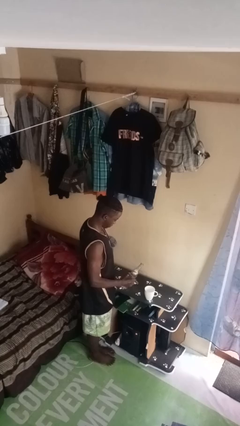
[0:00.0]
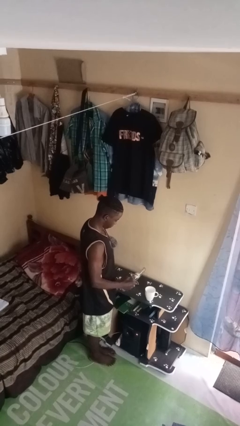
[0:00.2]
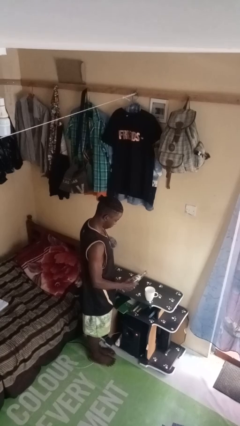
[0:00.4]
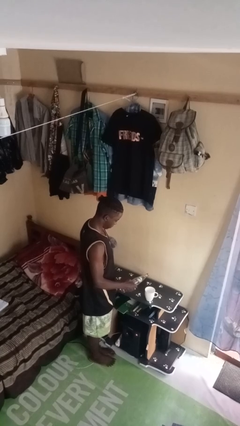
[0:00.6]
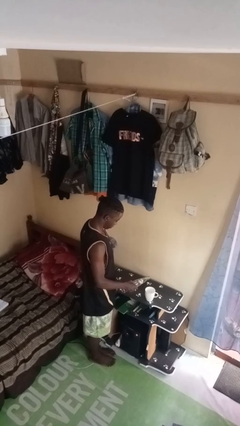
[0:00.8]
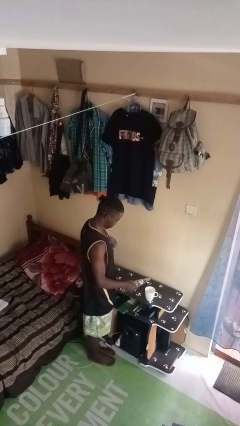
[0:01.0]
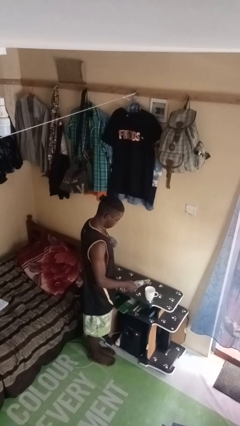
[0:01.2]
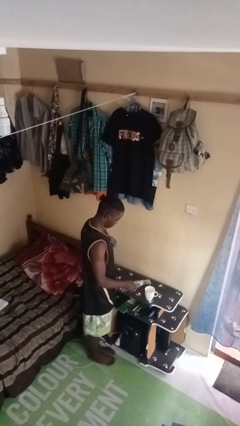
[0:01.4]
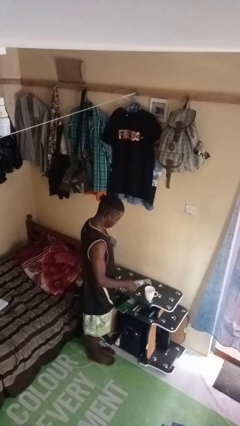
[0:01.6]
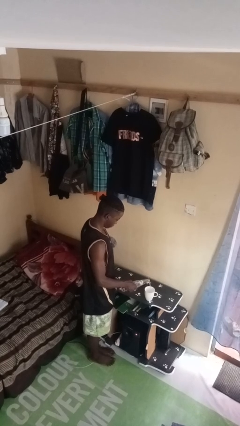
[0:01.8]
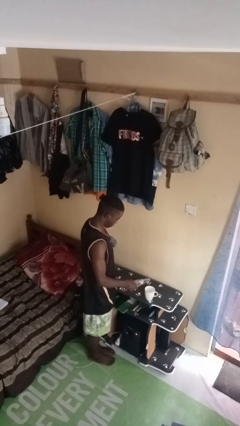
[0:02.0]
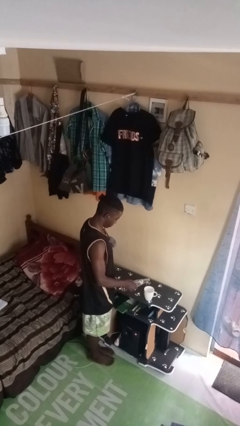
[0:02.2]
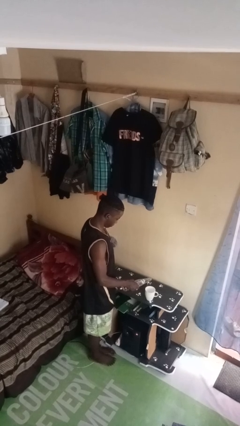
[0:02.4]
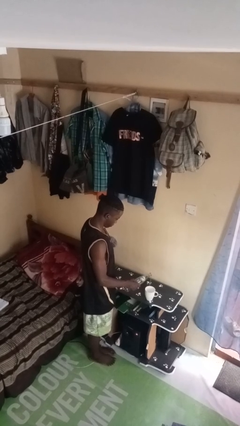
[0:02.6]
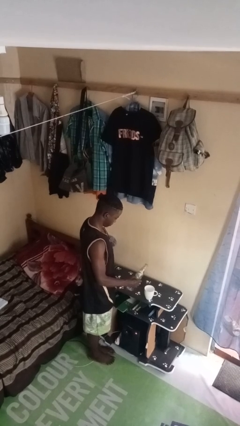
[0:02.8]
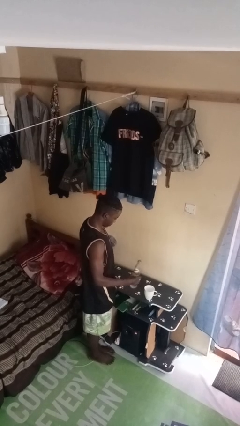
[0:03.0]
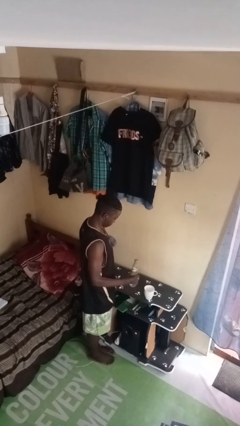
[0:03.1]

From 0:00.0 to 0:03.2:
person pours liquid into cup

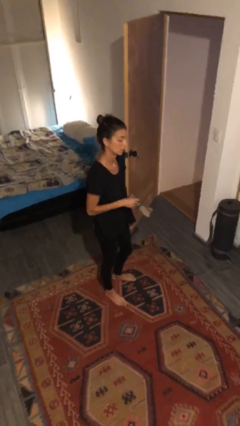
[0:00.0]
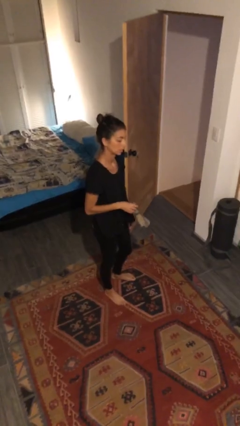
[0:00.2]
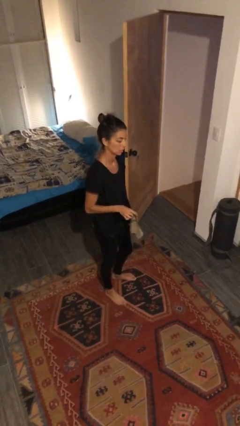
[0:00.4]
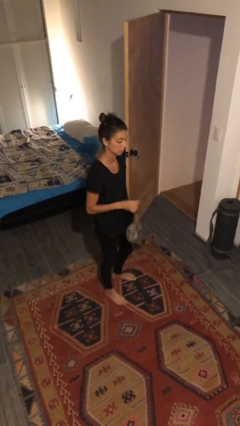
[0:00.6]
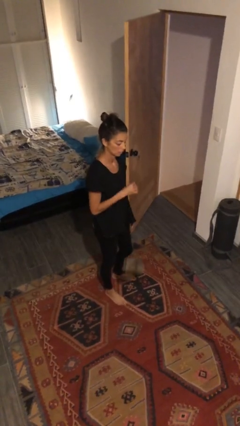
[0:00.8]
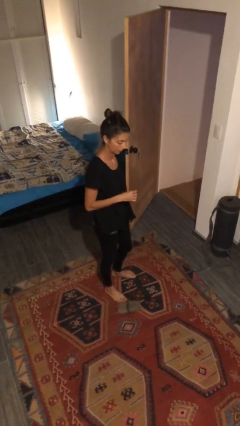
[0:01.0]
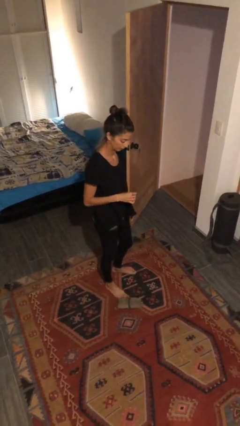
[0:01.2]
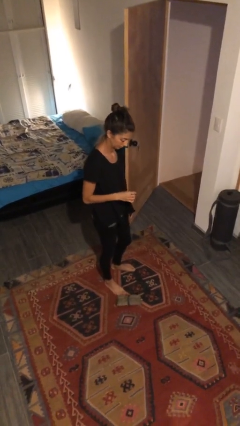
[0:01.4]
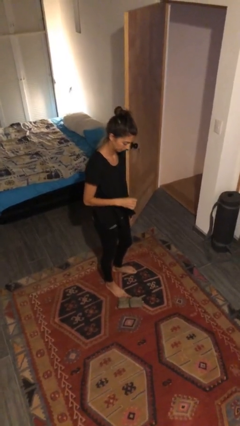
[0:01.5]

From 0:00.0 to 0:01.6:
person drops object

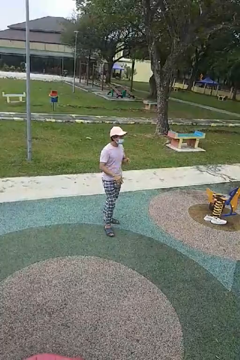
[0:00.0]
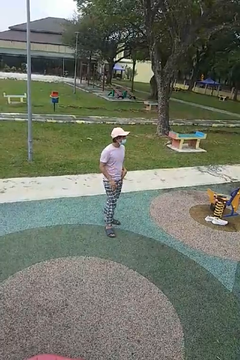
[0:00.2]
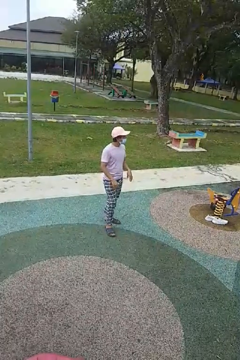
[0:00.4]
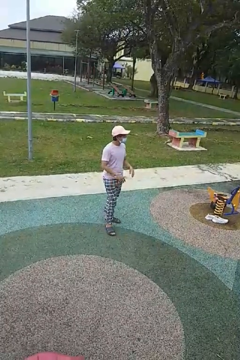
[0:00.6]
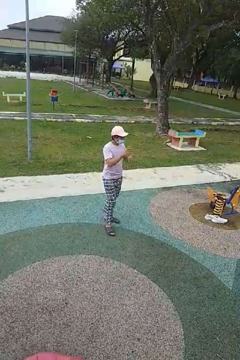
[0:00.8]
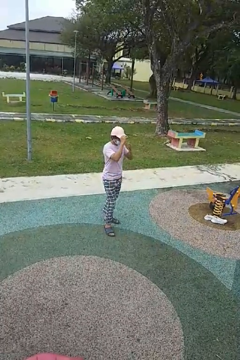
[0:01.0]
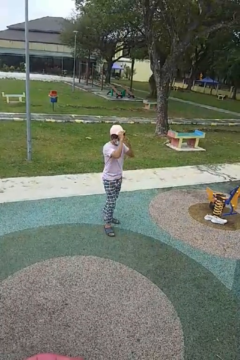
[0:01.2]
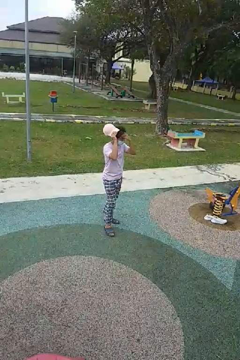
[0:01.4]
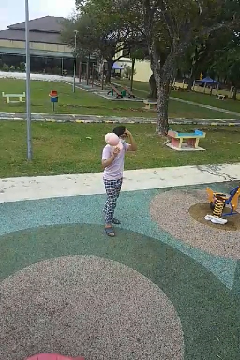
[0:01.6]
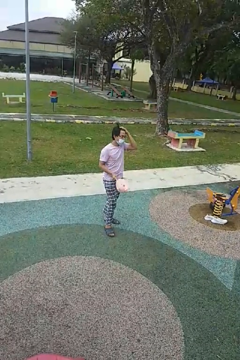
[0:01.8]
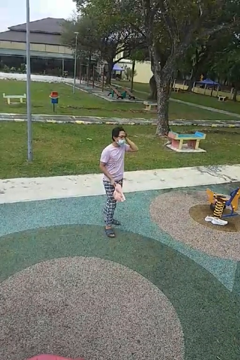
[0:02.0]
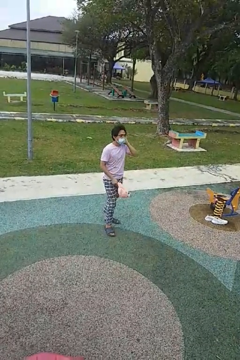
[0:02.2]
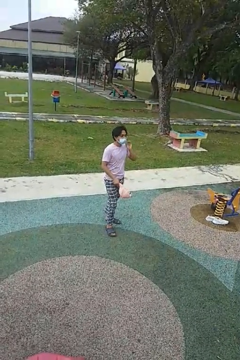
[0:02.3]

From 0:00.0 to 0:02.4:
person takes off hat

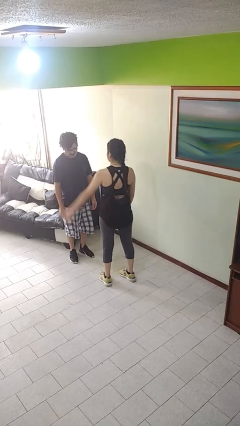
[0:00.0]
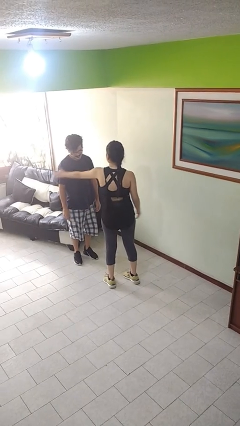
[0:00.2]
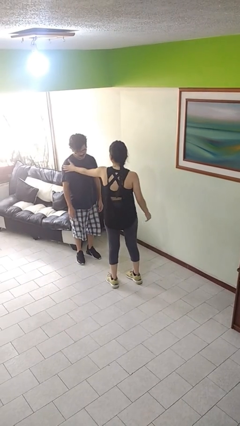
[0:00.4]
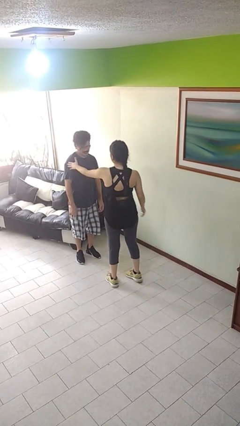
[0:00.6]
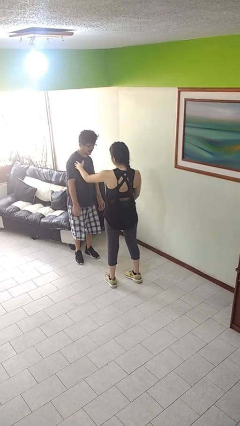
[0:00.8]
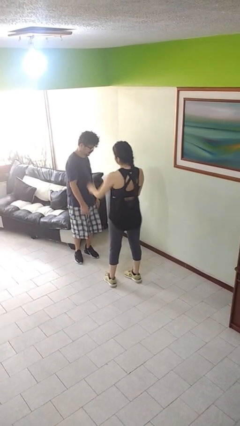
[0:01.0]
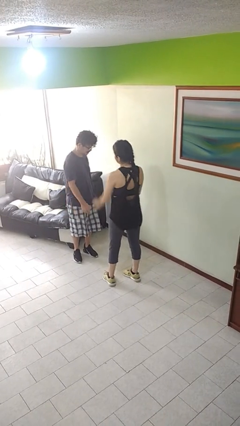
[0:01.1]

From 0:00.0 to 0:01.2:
person shoves person

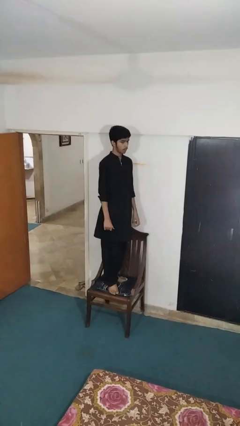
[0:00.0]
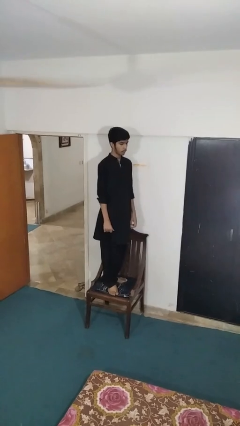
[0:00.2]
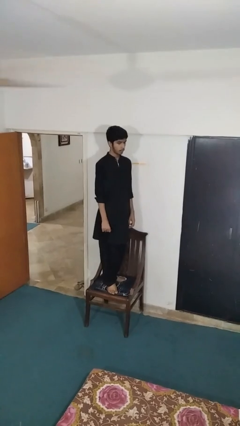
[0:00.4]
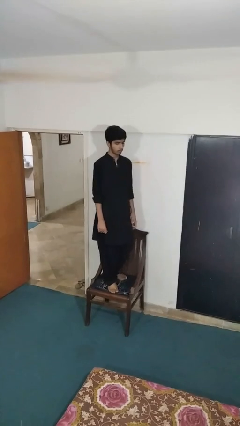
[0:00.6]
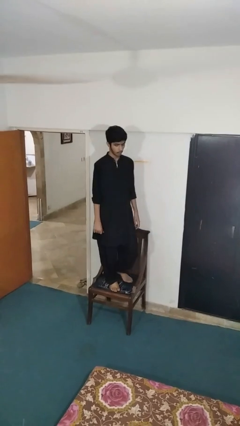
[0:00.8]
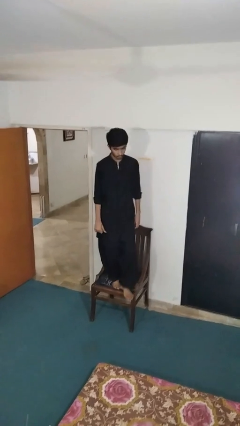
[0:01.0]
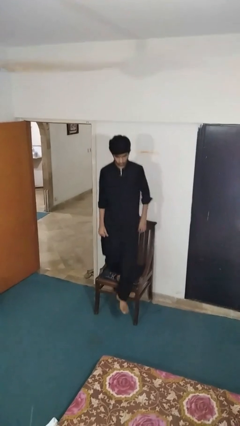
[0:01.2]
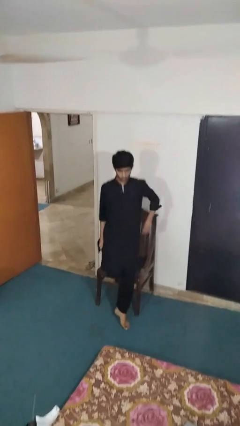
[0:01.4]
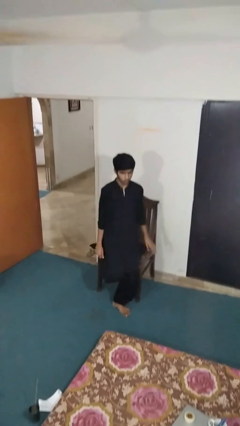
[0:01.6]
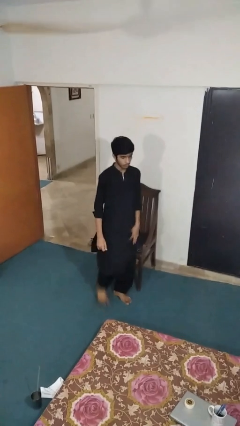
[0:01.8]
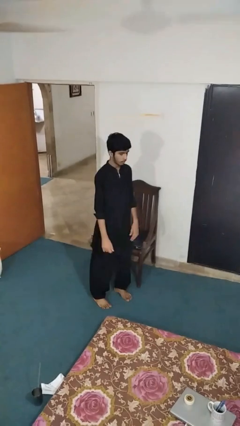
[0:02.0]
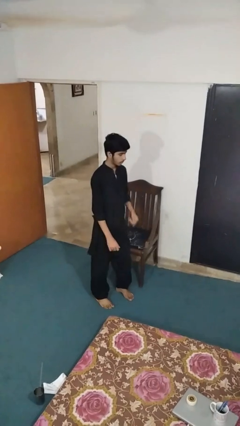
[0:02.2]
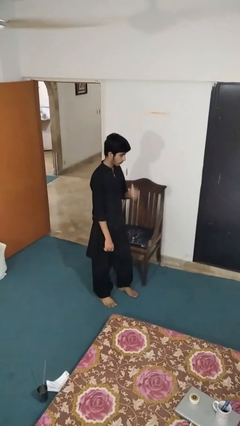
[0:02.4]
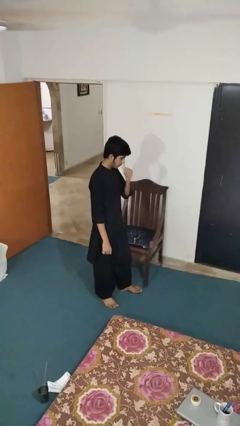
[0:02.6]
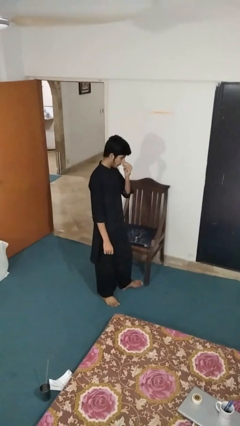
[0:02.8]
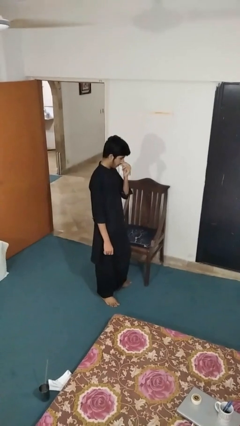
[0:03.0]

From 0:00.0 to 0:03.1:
person climbs off chair

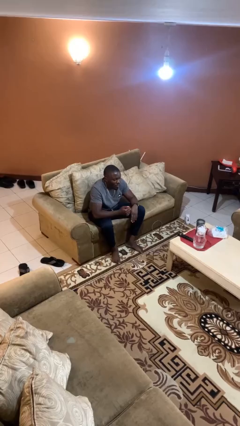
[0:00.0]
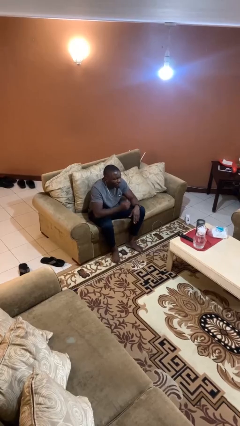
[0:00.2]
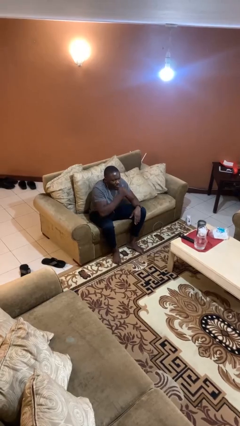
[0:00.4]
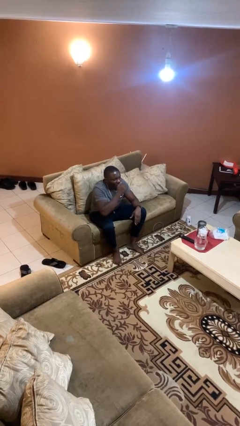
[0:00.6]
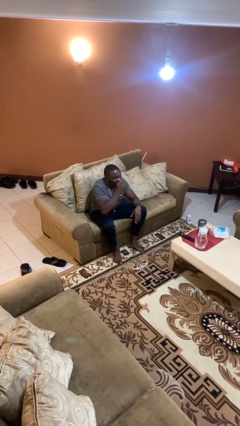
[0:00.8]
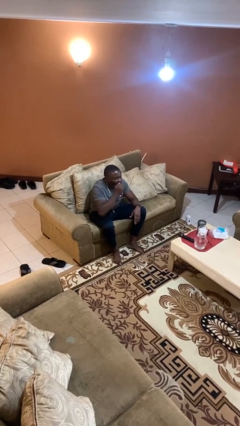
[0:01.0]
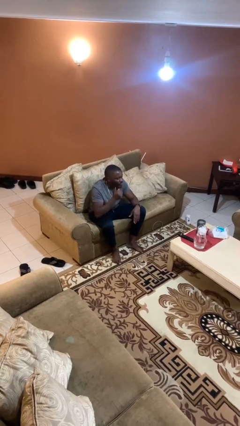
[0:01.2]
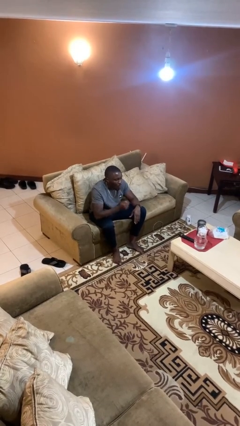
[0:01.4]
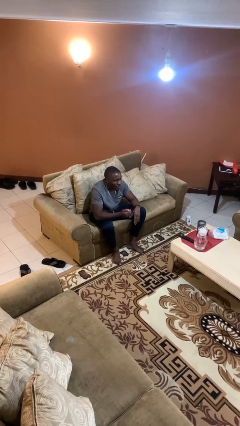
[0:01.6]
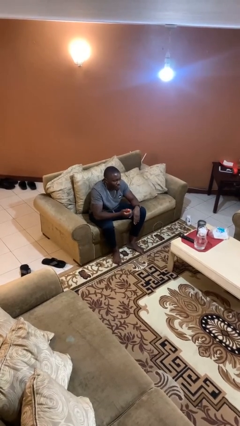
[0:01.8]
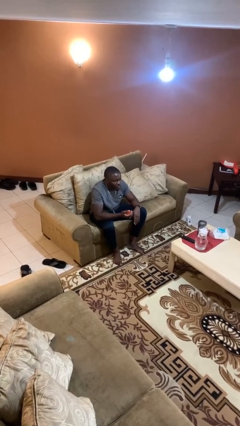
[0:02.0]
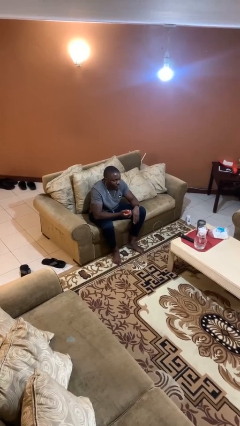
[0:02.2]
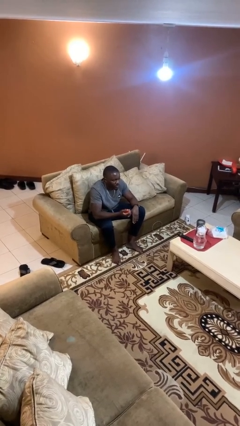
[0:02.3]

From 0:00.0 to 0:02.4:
person eats apple

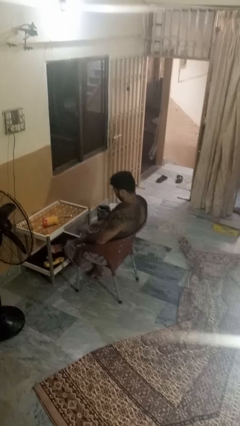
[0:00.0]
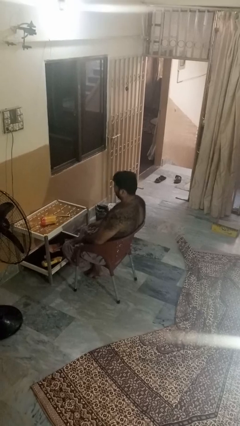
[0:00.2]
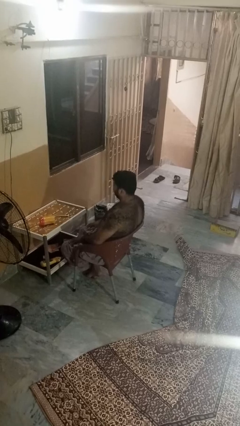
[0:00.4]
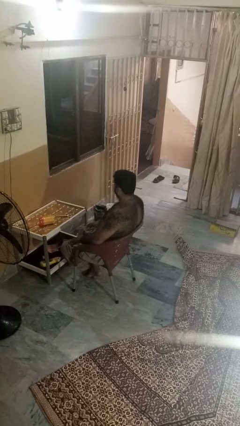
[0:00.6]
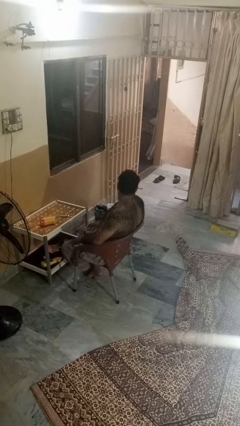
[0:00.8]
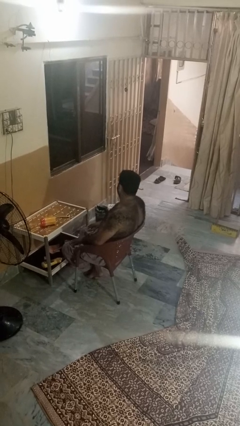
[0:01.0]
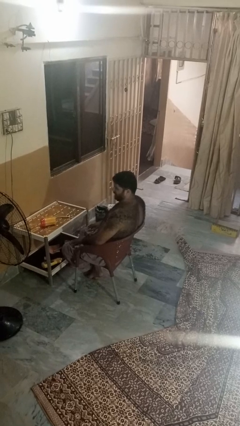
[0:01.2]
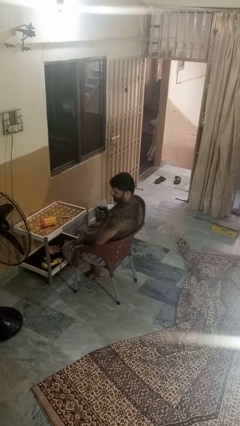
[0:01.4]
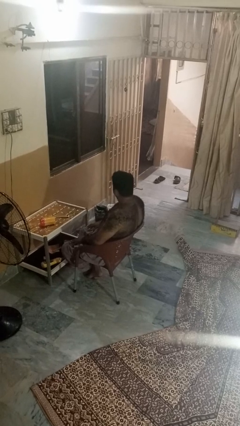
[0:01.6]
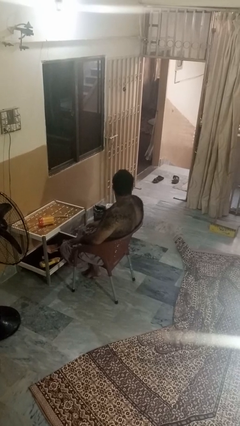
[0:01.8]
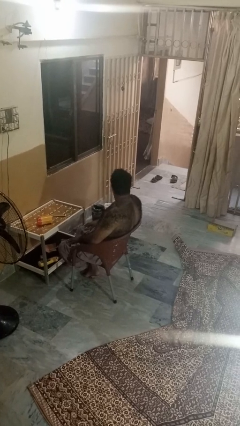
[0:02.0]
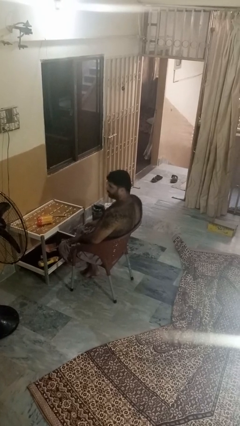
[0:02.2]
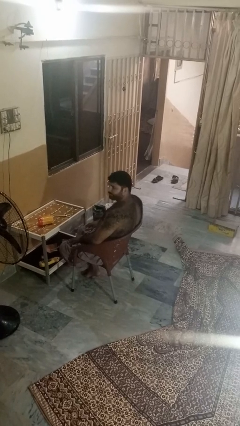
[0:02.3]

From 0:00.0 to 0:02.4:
person shakes head

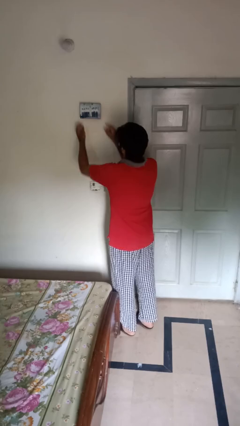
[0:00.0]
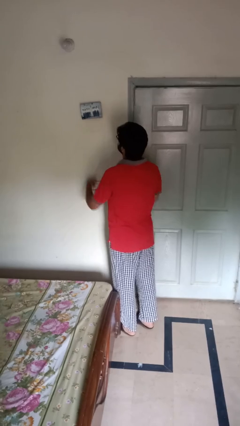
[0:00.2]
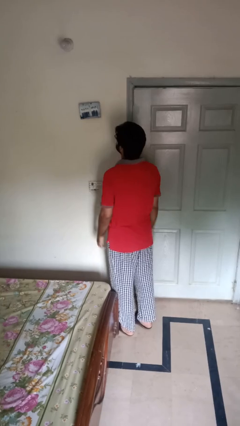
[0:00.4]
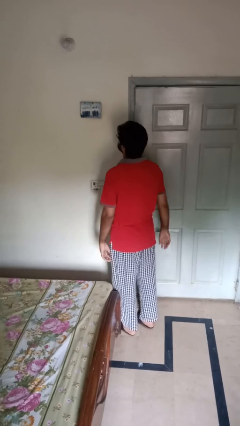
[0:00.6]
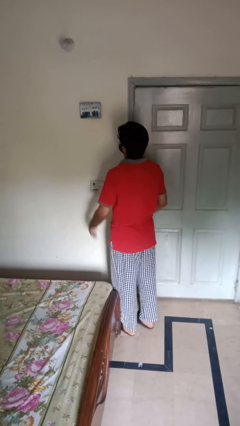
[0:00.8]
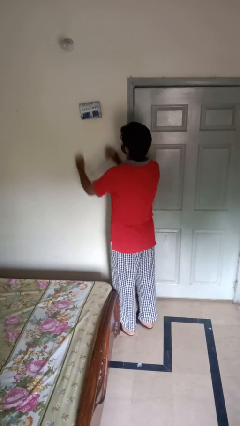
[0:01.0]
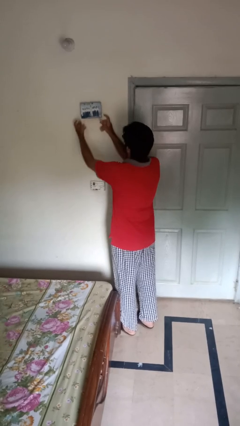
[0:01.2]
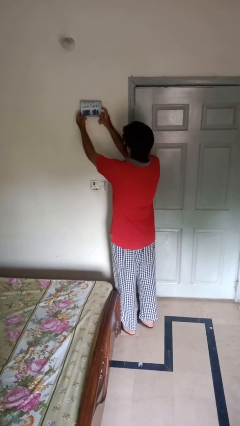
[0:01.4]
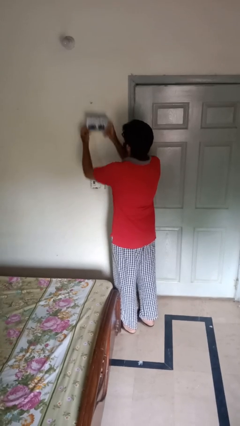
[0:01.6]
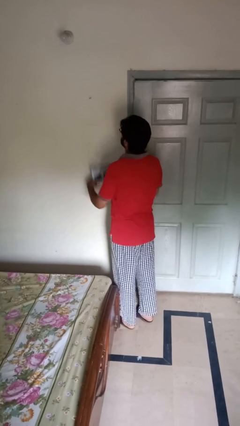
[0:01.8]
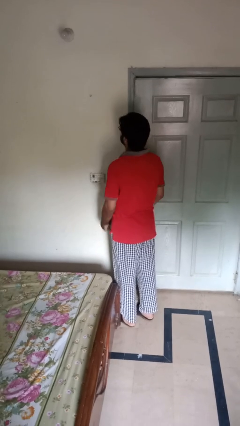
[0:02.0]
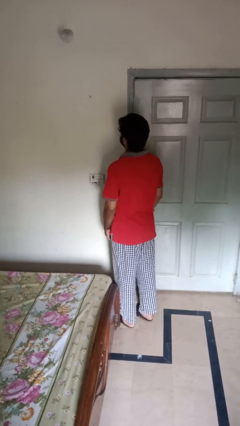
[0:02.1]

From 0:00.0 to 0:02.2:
person takes down picture frame
